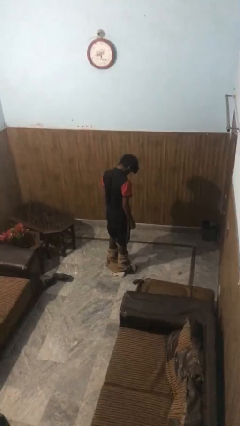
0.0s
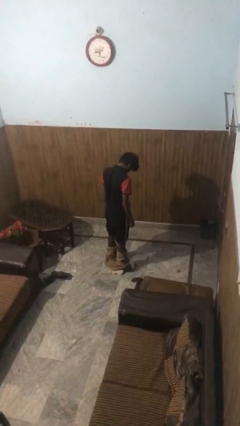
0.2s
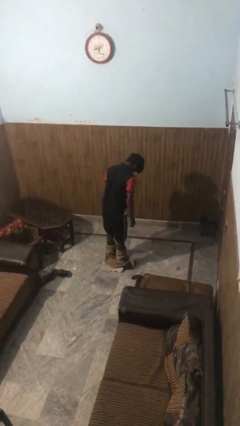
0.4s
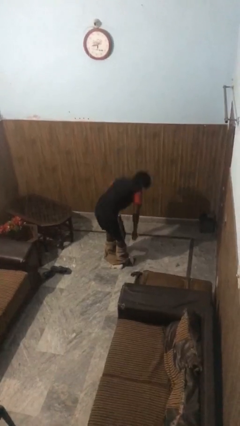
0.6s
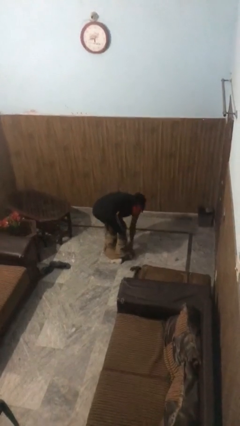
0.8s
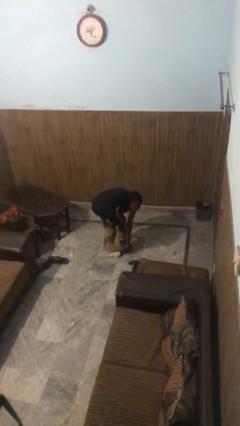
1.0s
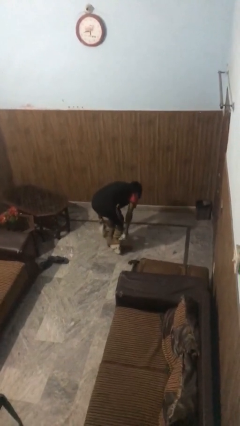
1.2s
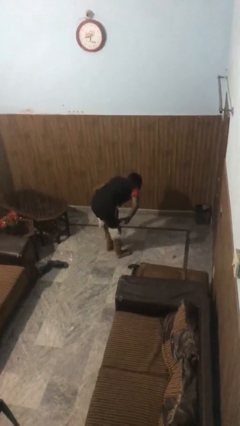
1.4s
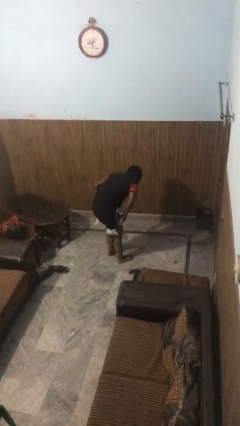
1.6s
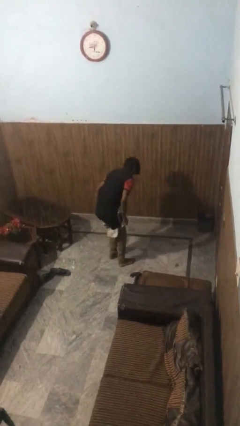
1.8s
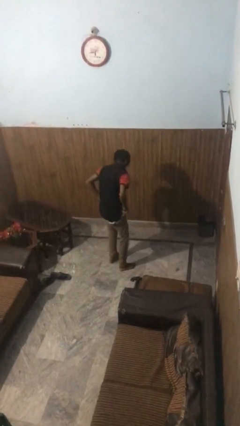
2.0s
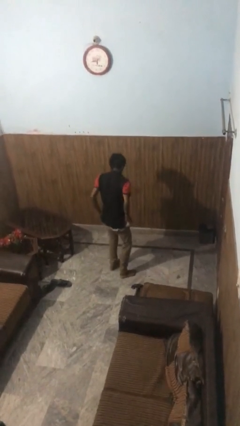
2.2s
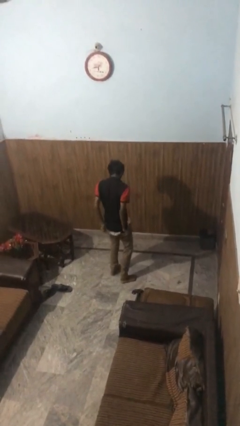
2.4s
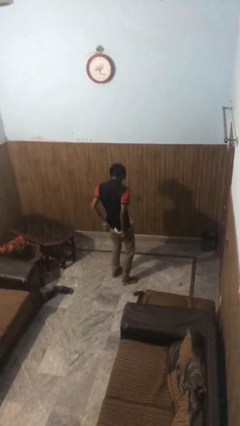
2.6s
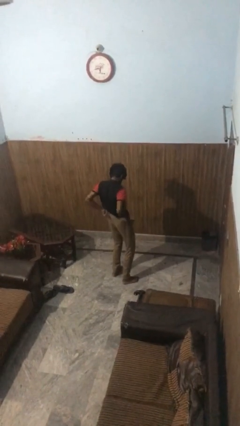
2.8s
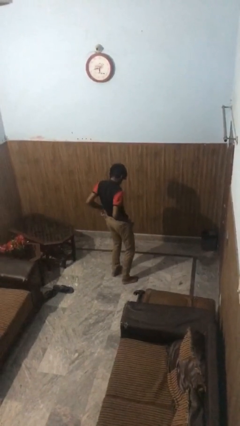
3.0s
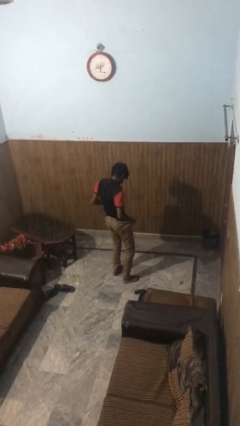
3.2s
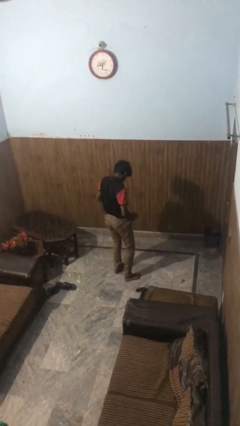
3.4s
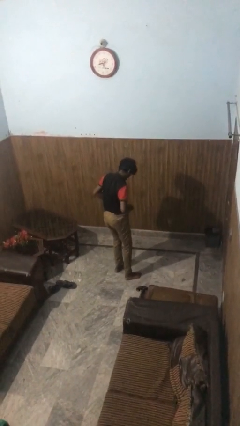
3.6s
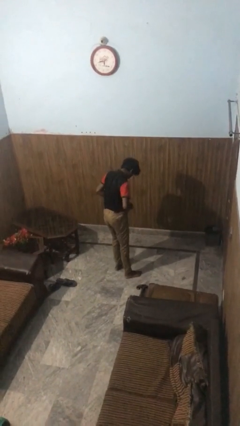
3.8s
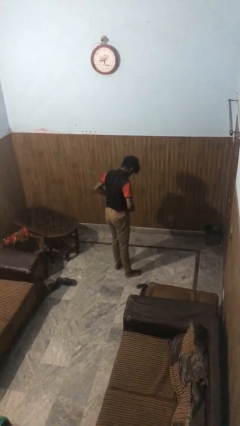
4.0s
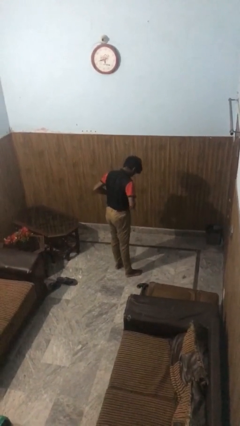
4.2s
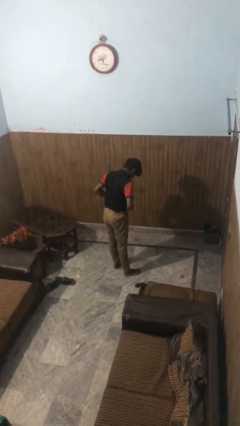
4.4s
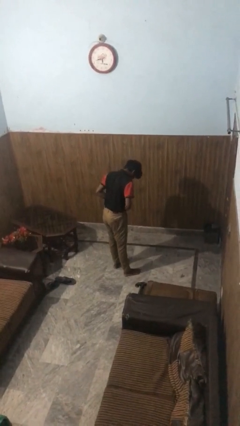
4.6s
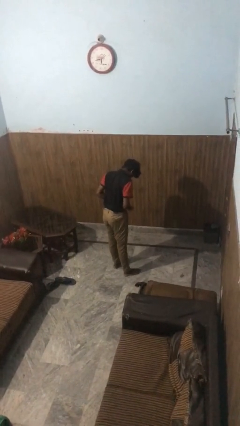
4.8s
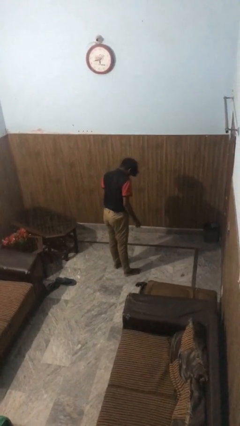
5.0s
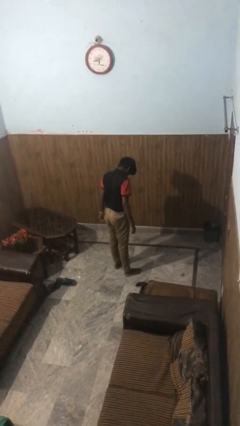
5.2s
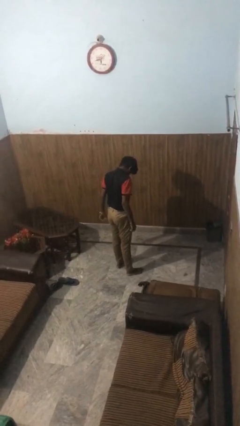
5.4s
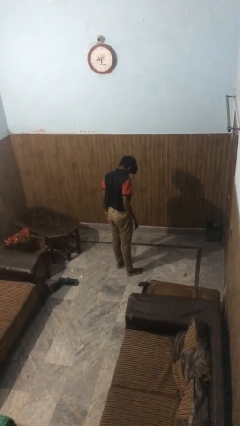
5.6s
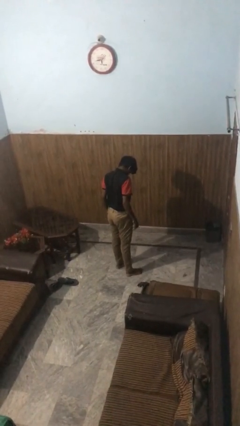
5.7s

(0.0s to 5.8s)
person puts on pants

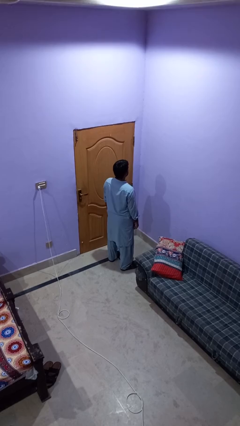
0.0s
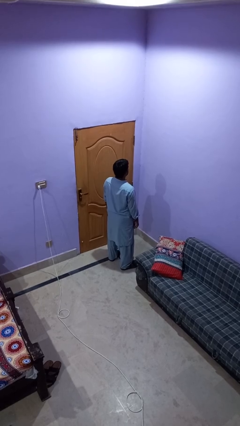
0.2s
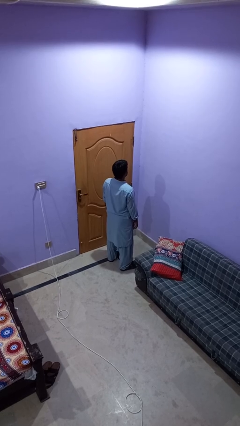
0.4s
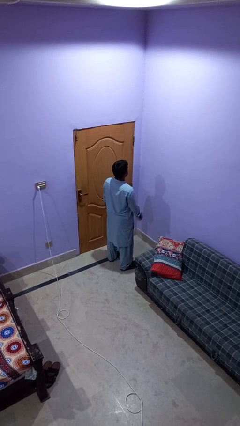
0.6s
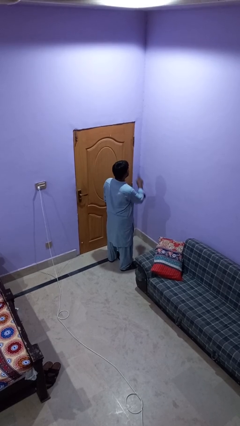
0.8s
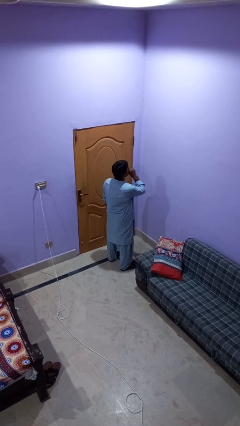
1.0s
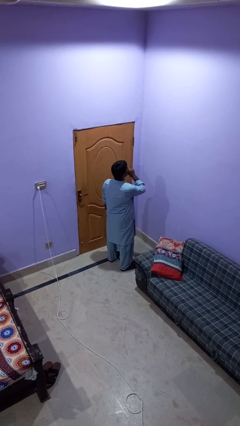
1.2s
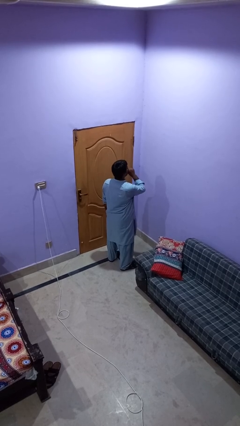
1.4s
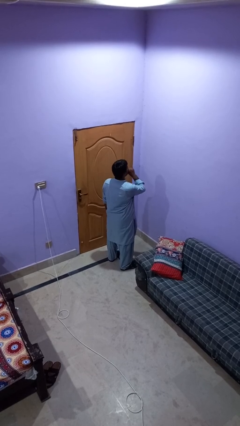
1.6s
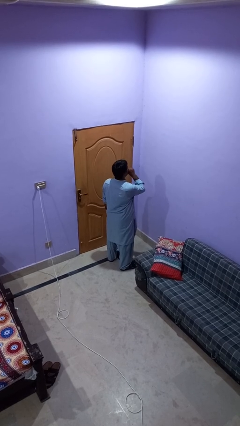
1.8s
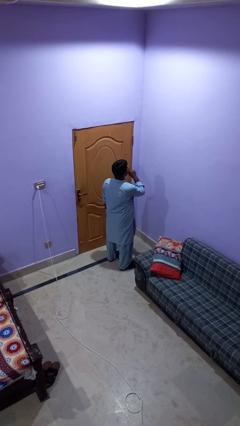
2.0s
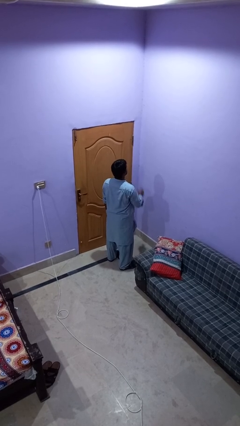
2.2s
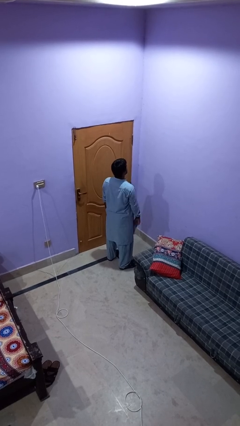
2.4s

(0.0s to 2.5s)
person gestures be quiet

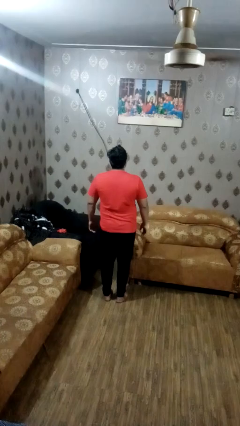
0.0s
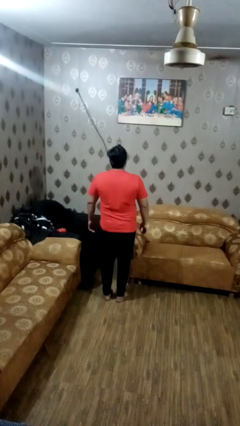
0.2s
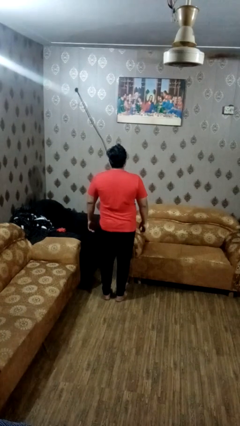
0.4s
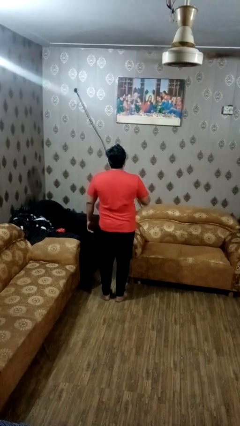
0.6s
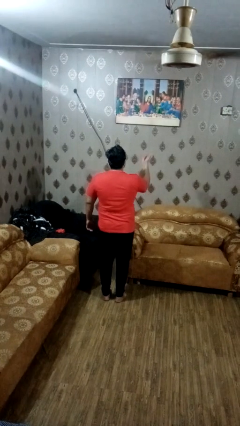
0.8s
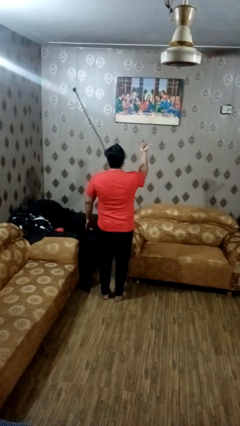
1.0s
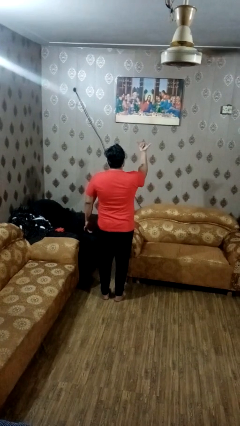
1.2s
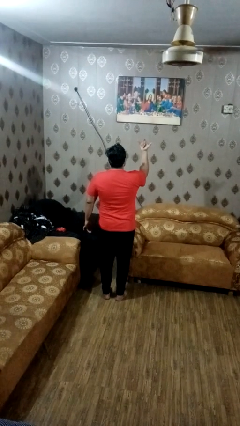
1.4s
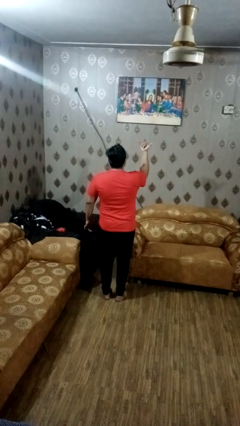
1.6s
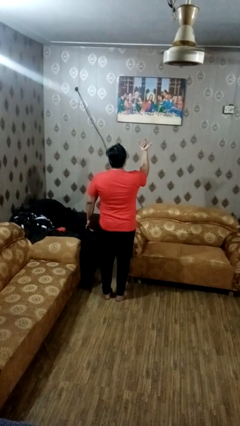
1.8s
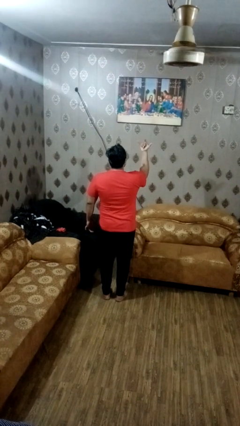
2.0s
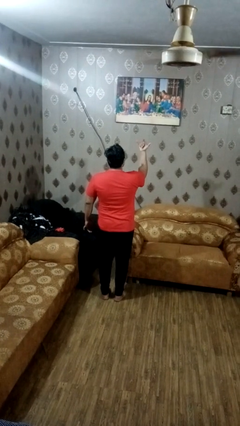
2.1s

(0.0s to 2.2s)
person gestures hang loose

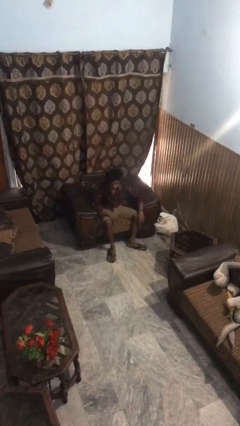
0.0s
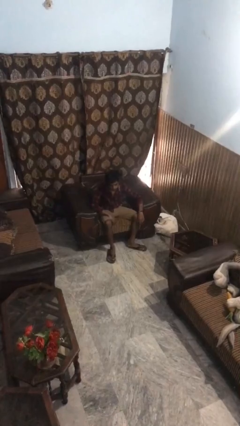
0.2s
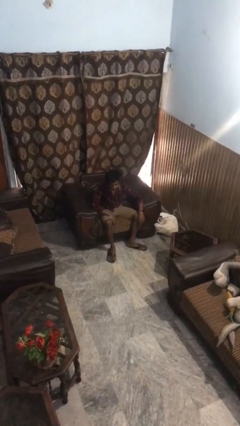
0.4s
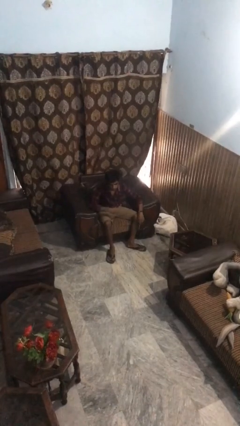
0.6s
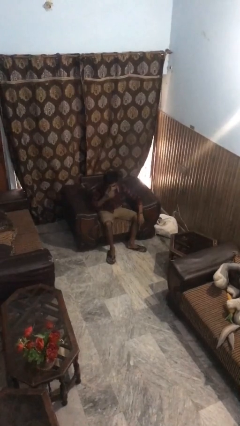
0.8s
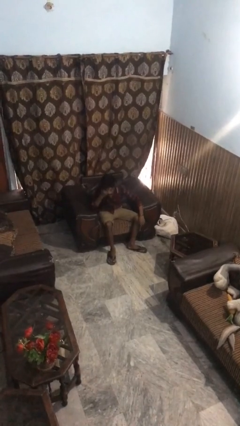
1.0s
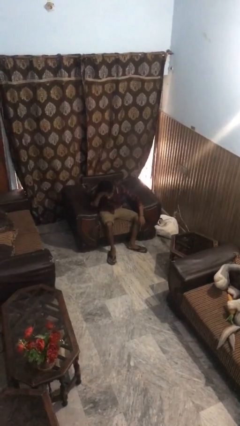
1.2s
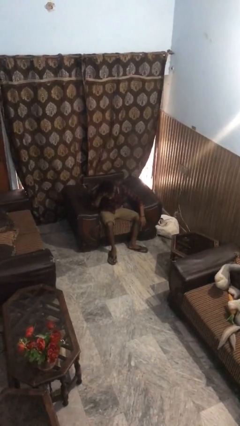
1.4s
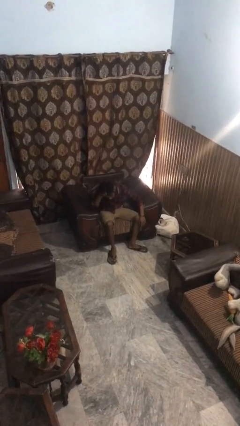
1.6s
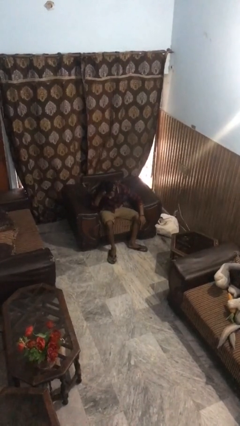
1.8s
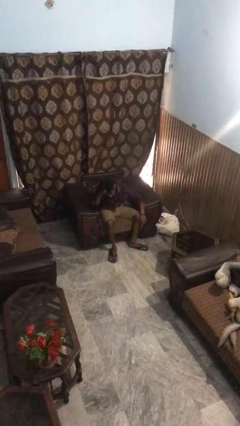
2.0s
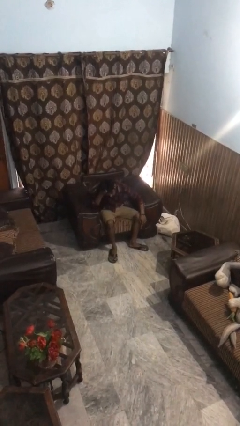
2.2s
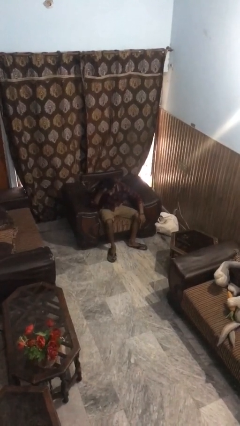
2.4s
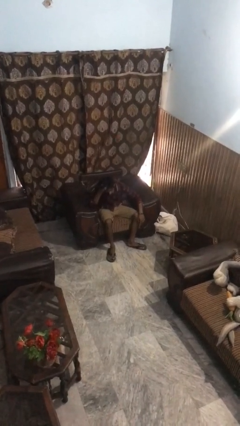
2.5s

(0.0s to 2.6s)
person strokes hair

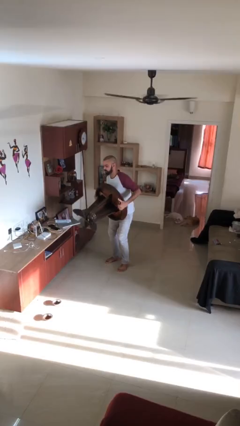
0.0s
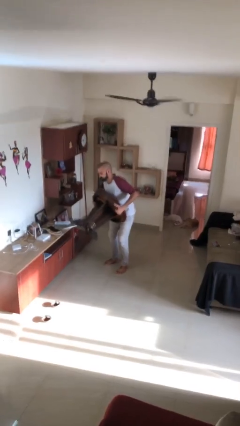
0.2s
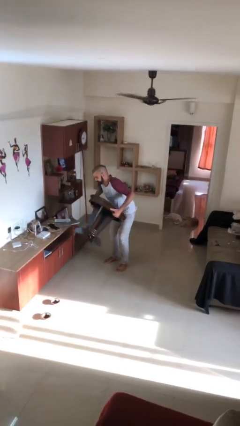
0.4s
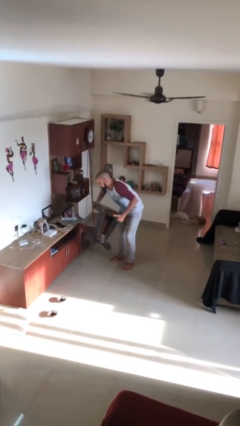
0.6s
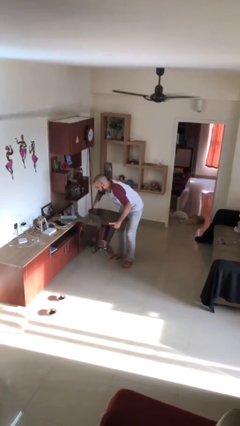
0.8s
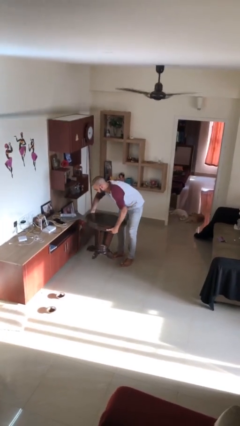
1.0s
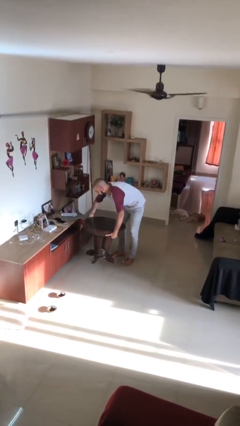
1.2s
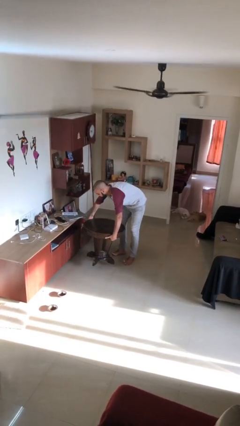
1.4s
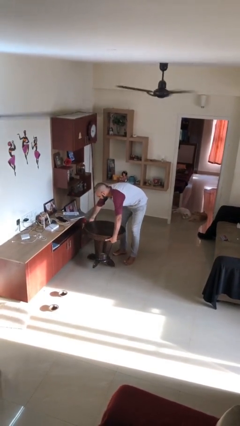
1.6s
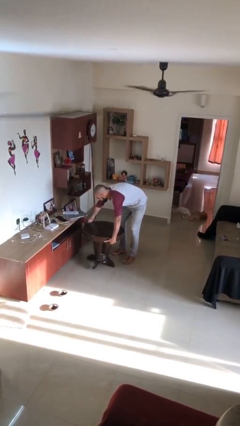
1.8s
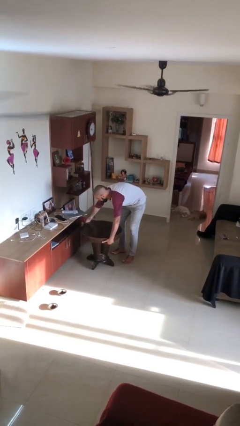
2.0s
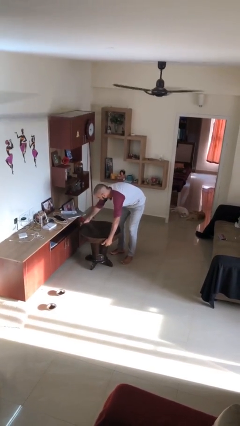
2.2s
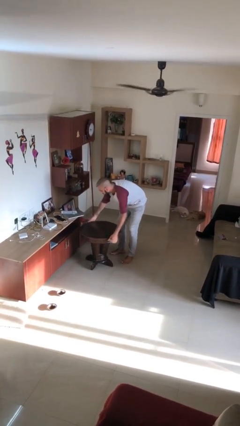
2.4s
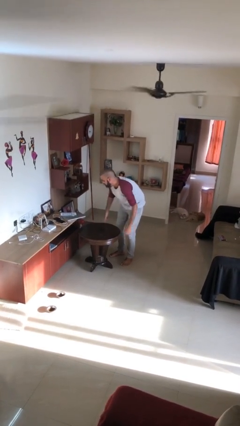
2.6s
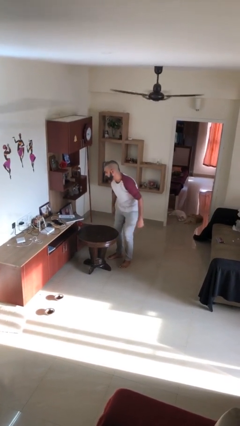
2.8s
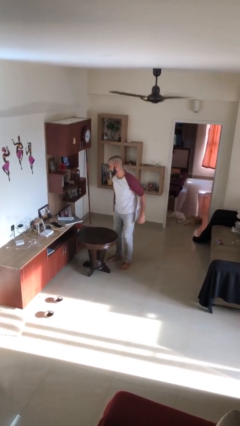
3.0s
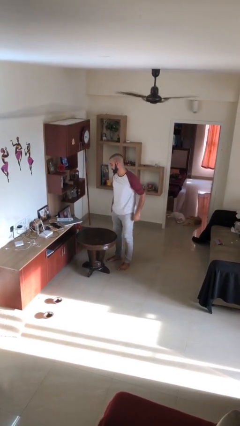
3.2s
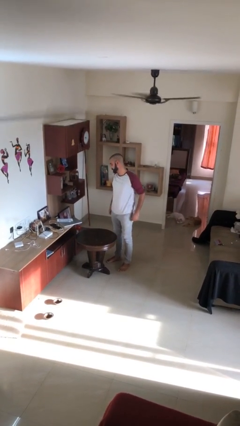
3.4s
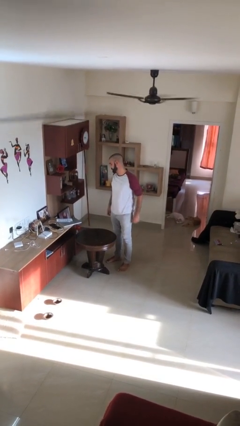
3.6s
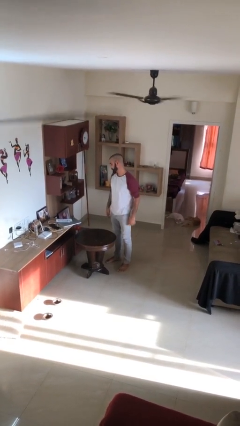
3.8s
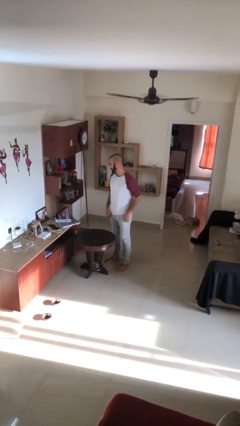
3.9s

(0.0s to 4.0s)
person puts down object on floor

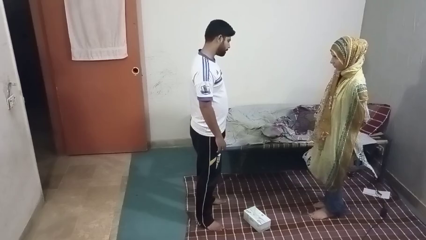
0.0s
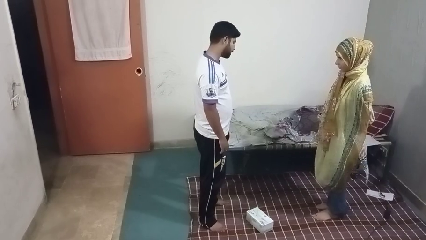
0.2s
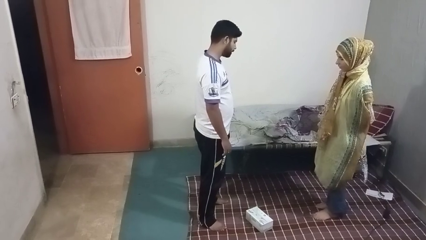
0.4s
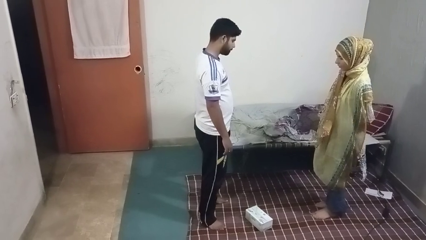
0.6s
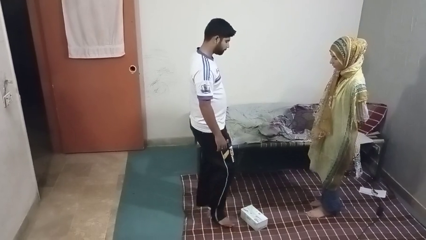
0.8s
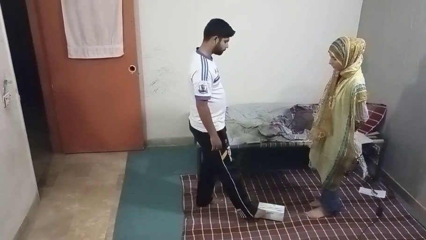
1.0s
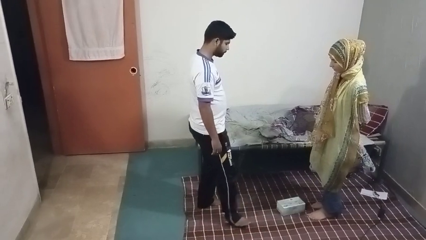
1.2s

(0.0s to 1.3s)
person kicks object to person
